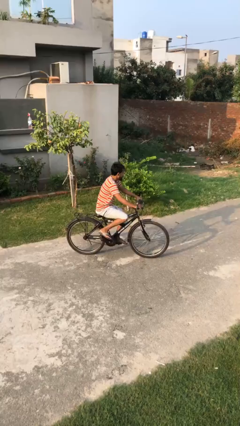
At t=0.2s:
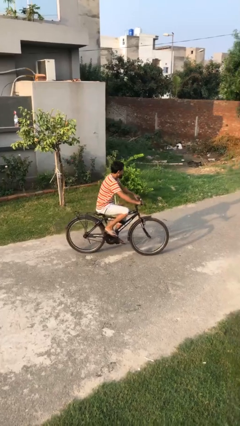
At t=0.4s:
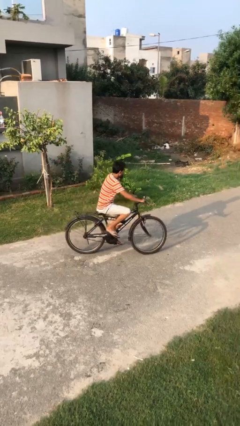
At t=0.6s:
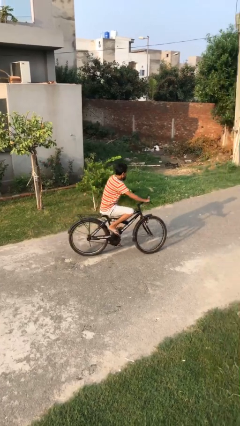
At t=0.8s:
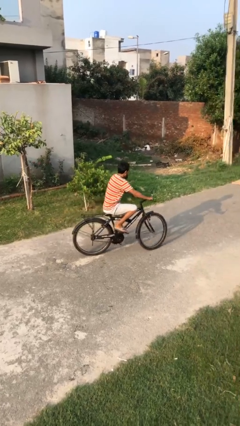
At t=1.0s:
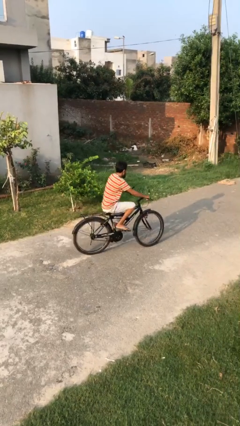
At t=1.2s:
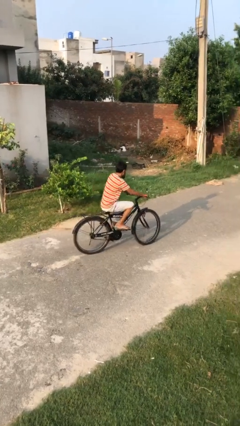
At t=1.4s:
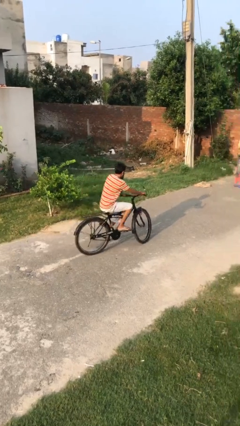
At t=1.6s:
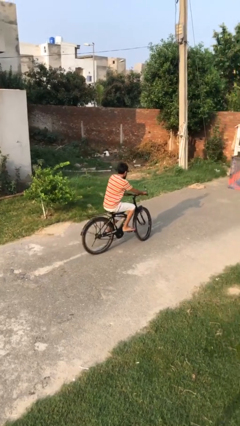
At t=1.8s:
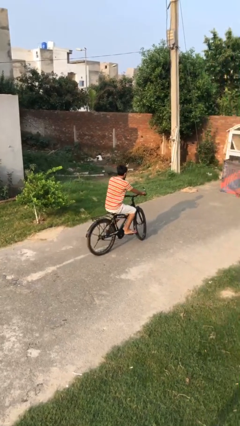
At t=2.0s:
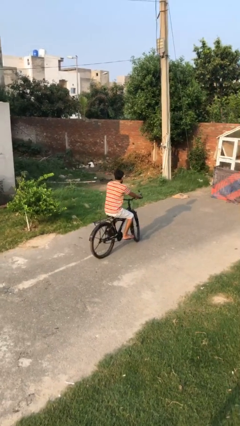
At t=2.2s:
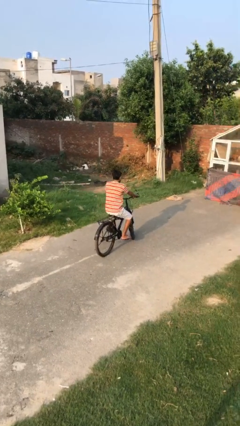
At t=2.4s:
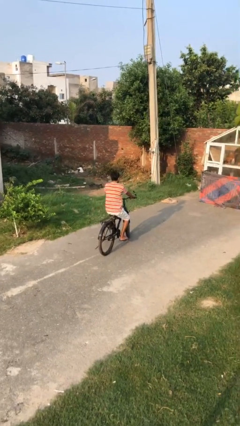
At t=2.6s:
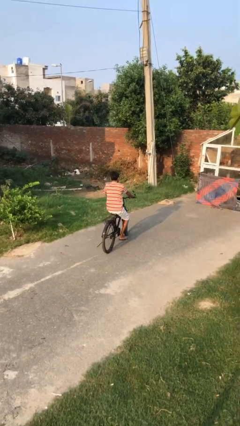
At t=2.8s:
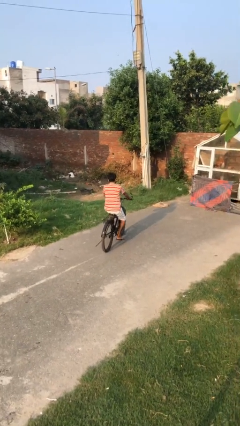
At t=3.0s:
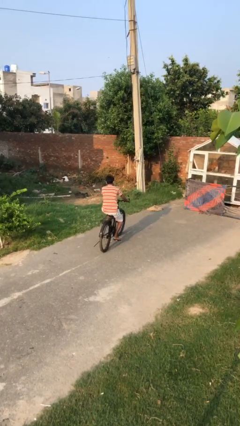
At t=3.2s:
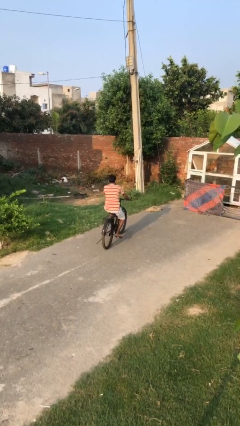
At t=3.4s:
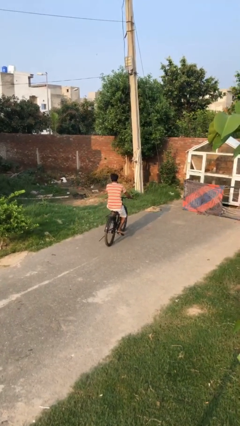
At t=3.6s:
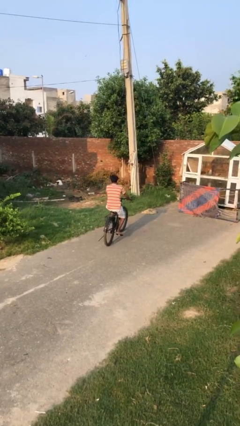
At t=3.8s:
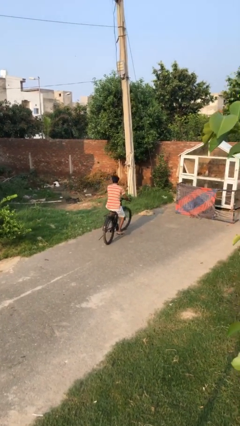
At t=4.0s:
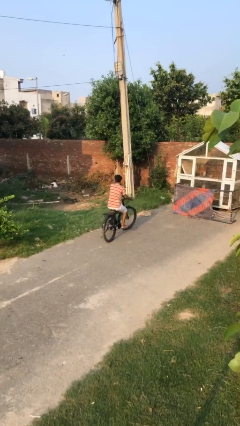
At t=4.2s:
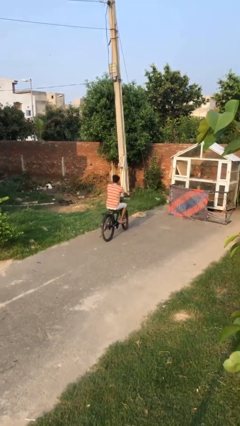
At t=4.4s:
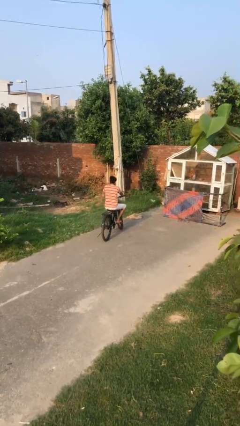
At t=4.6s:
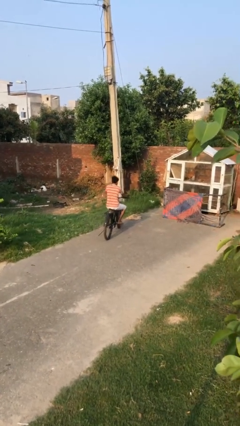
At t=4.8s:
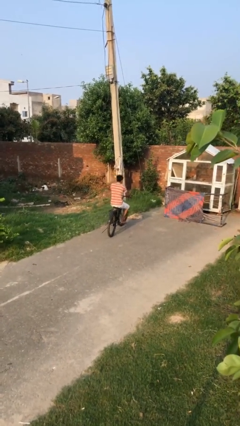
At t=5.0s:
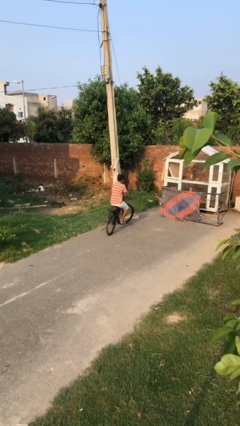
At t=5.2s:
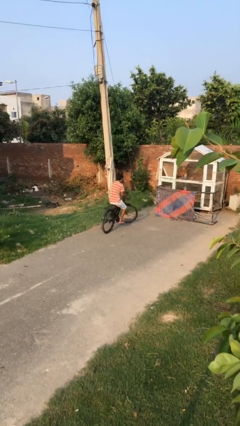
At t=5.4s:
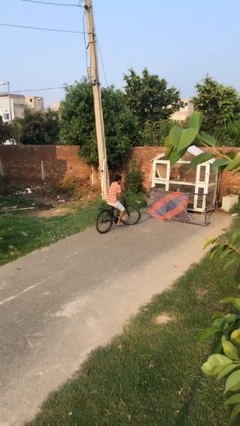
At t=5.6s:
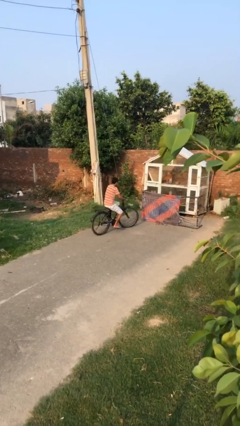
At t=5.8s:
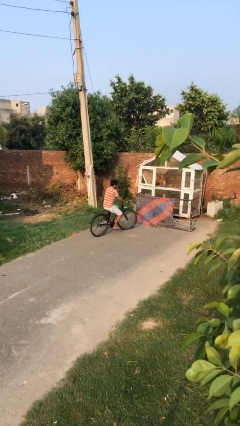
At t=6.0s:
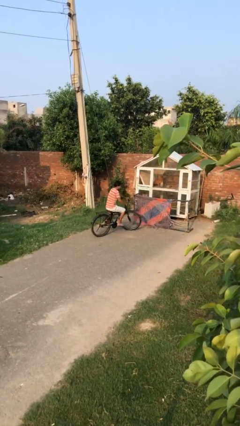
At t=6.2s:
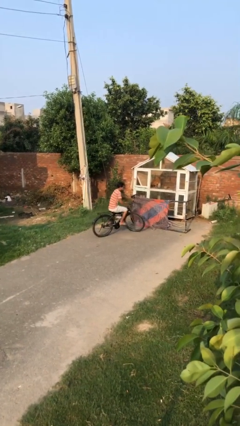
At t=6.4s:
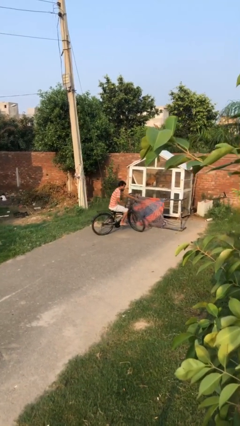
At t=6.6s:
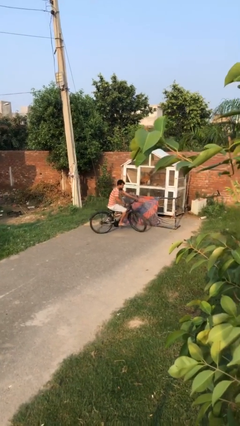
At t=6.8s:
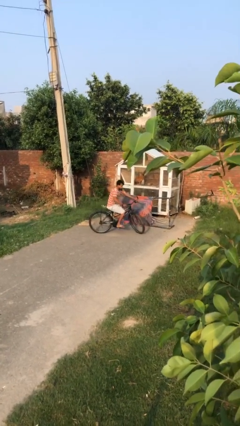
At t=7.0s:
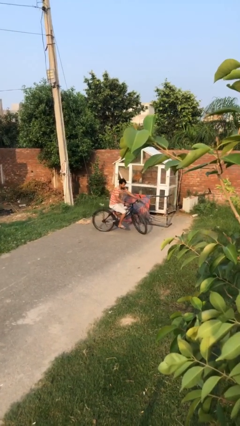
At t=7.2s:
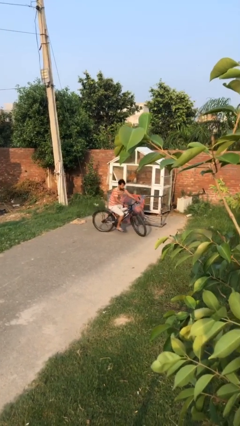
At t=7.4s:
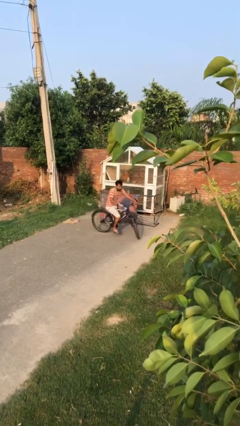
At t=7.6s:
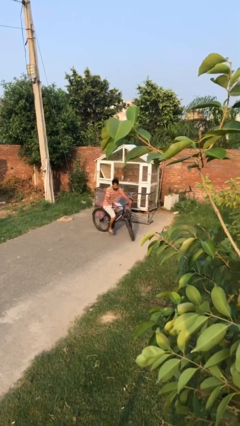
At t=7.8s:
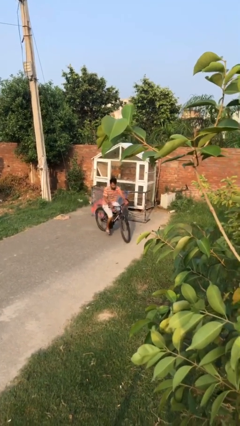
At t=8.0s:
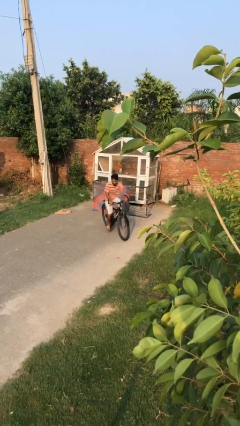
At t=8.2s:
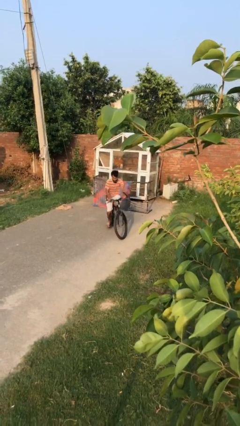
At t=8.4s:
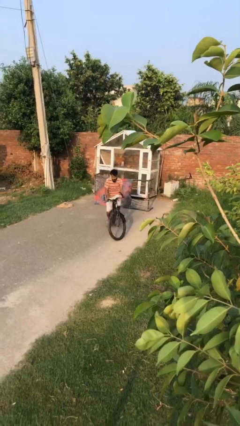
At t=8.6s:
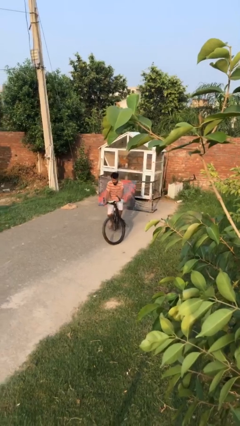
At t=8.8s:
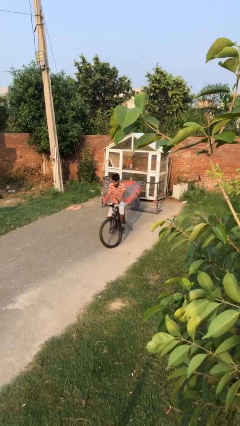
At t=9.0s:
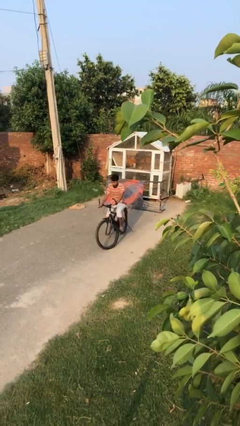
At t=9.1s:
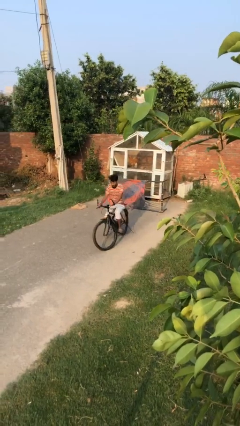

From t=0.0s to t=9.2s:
person rides bicycle

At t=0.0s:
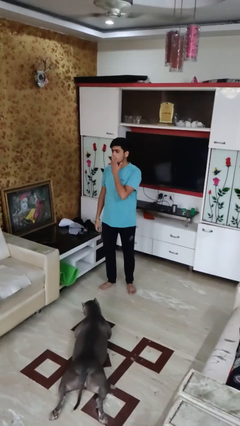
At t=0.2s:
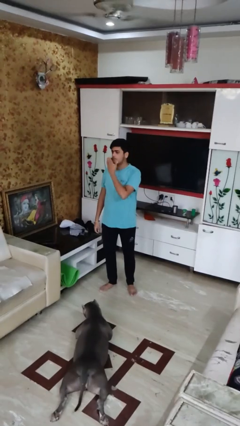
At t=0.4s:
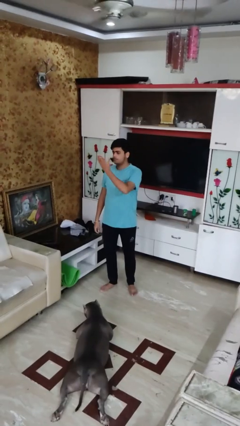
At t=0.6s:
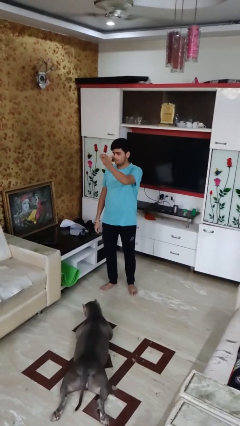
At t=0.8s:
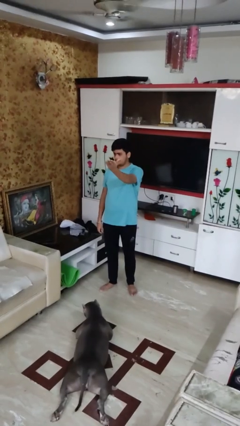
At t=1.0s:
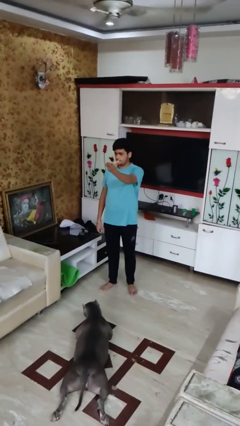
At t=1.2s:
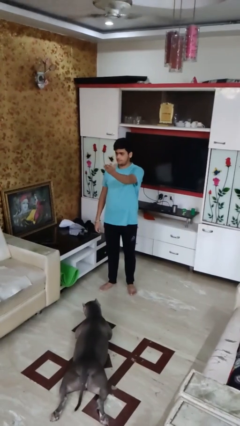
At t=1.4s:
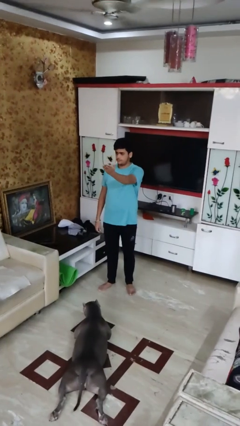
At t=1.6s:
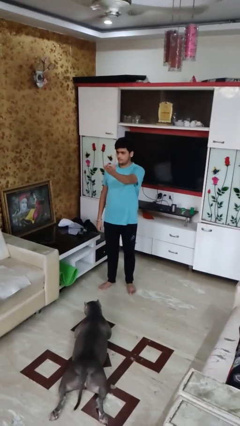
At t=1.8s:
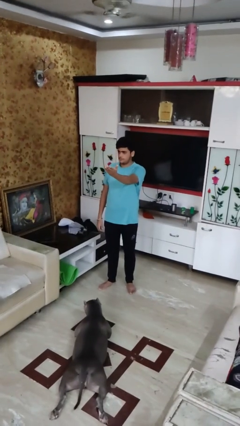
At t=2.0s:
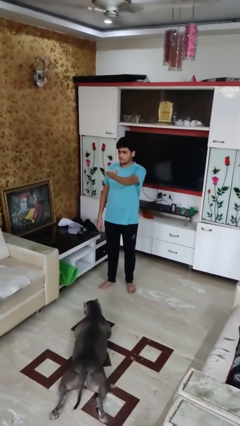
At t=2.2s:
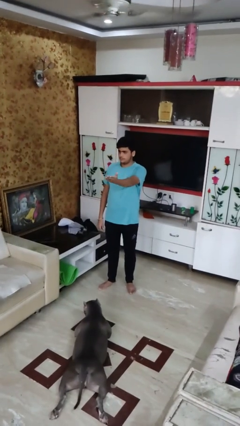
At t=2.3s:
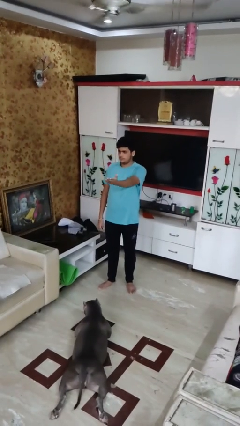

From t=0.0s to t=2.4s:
person gestures blow kiss

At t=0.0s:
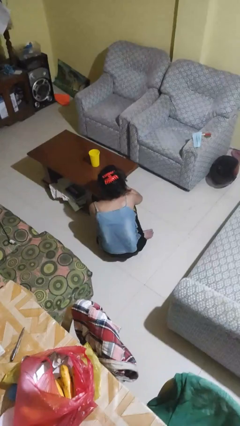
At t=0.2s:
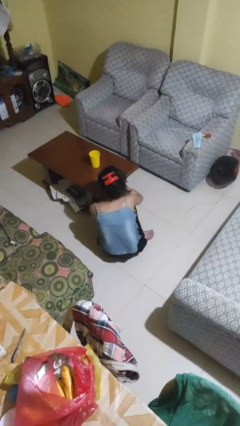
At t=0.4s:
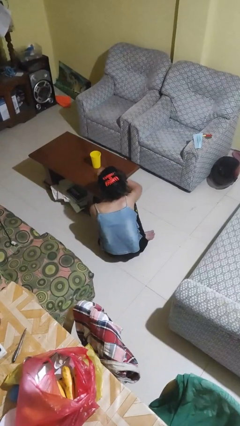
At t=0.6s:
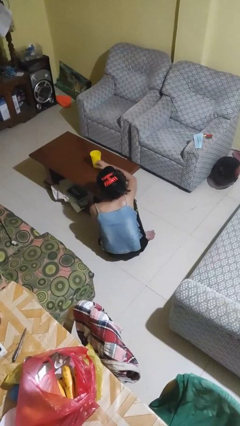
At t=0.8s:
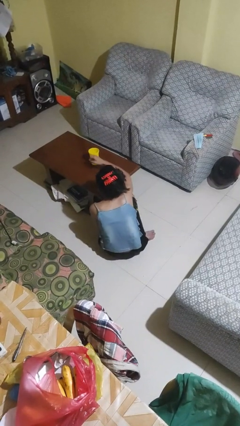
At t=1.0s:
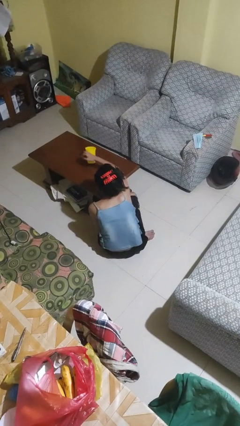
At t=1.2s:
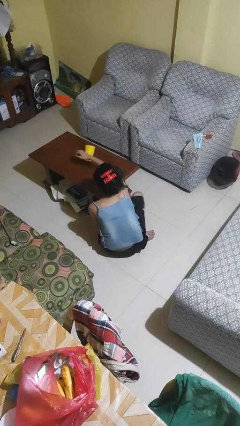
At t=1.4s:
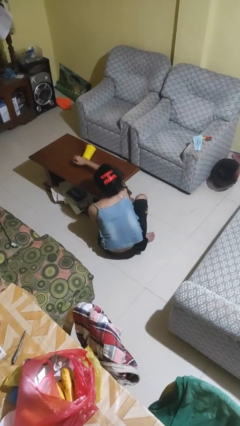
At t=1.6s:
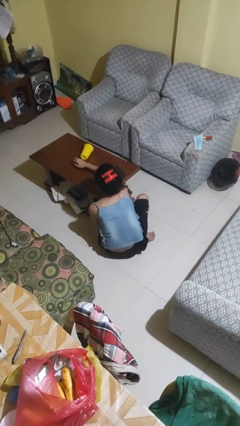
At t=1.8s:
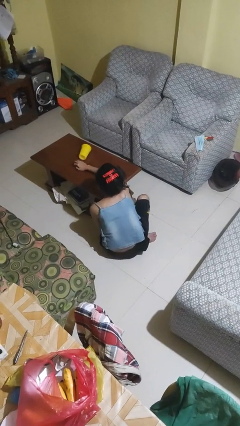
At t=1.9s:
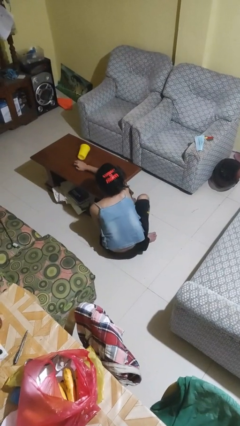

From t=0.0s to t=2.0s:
person knocks over glass

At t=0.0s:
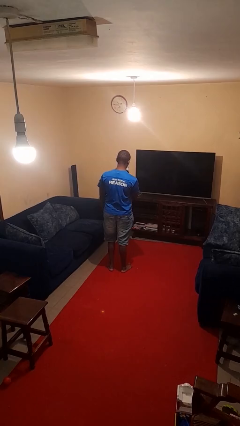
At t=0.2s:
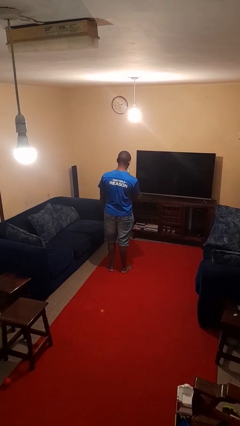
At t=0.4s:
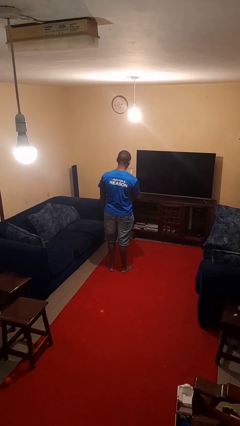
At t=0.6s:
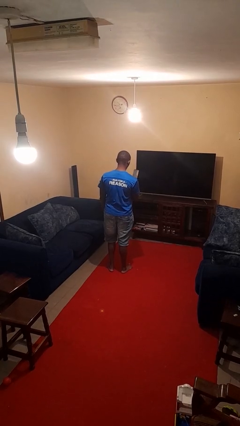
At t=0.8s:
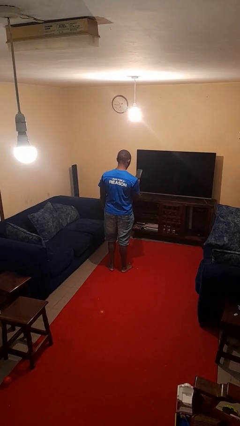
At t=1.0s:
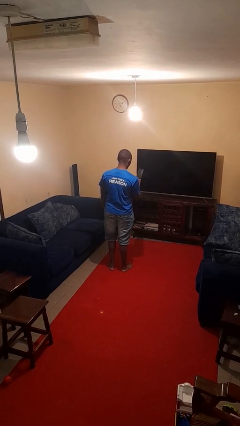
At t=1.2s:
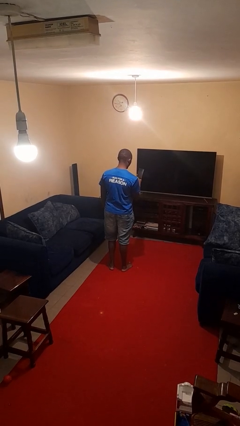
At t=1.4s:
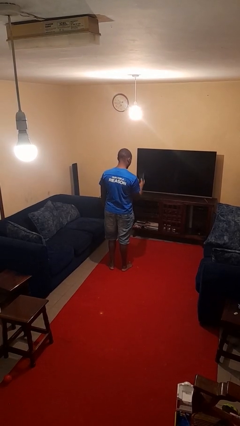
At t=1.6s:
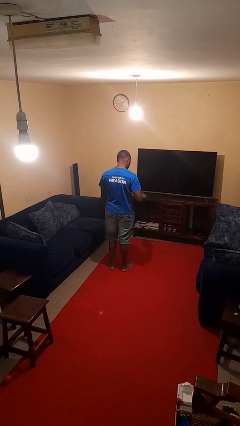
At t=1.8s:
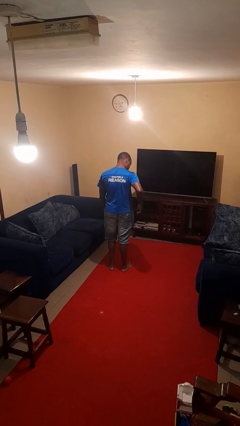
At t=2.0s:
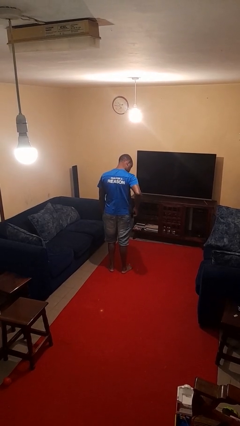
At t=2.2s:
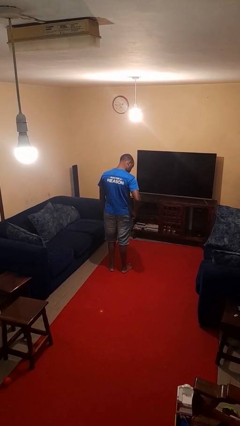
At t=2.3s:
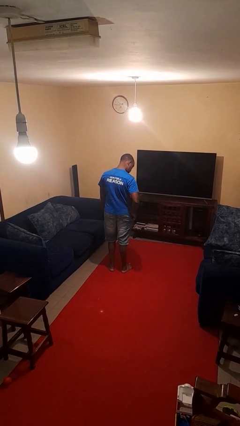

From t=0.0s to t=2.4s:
person puts phone into pocket

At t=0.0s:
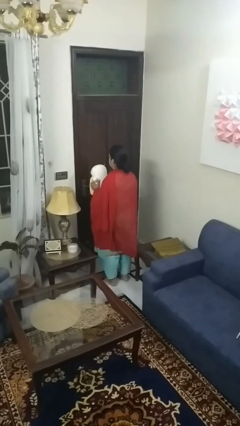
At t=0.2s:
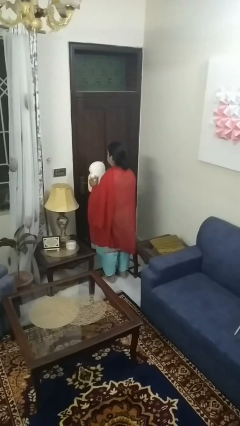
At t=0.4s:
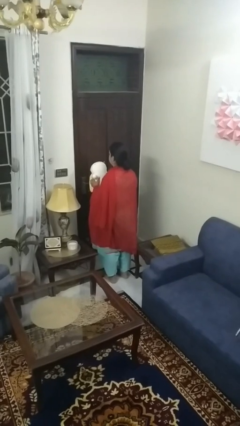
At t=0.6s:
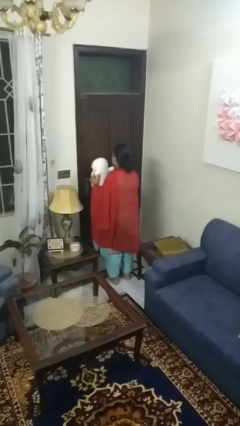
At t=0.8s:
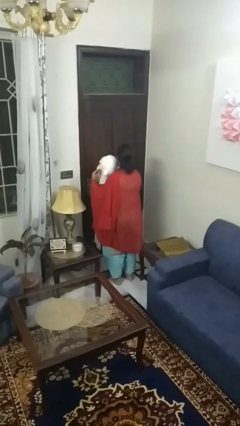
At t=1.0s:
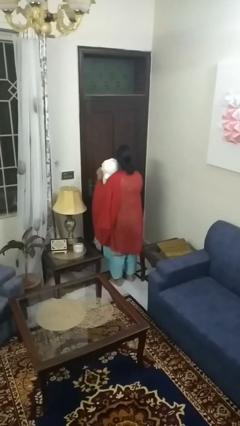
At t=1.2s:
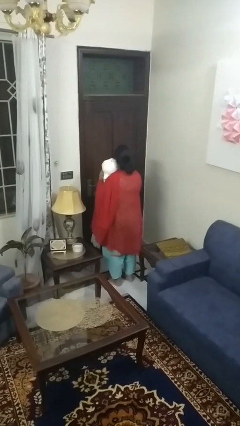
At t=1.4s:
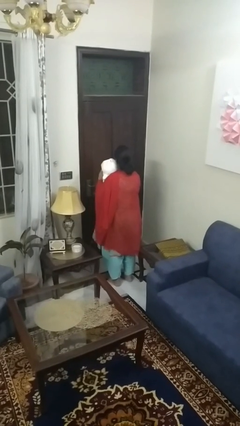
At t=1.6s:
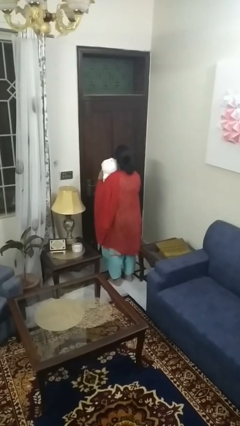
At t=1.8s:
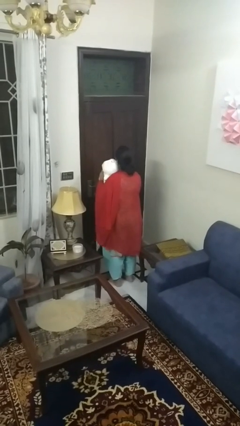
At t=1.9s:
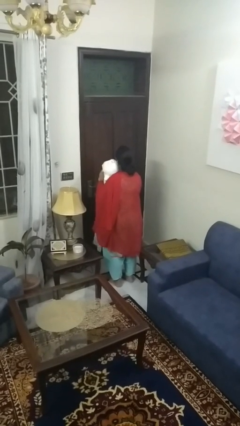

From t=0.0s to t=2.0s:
person hugs stuffed animal
